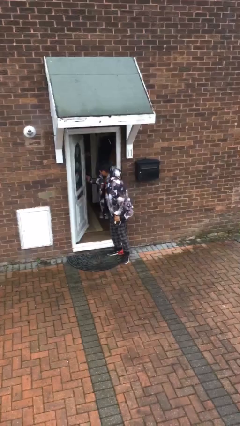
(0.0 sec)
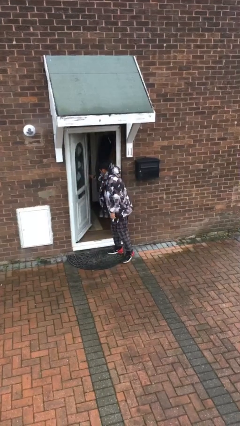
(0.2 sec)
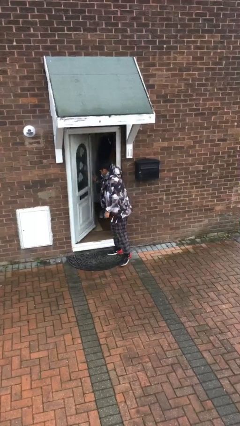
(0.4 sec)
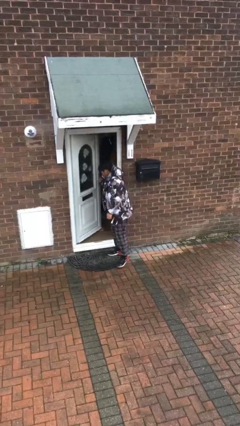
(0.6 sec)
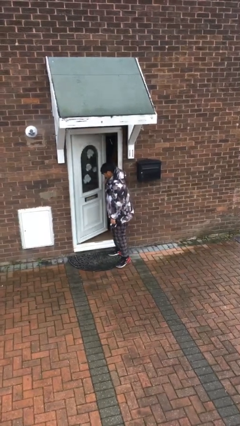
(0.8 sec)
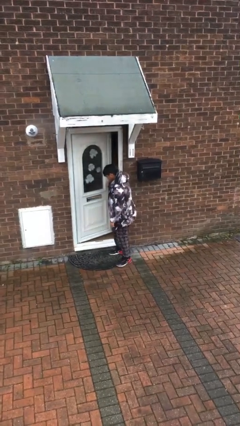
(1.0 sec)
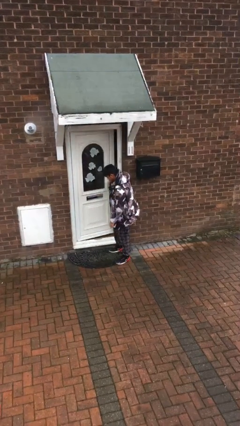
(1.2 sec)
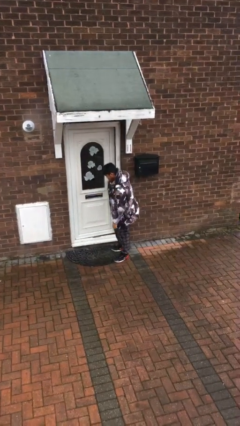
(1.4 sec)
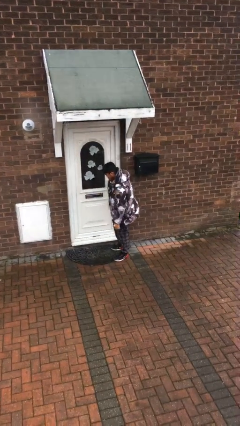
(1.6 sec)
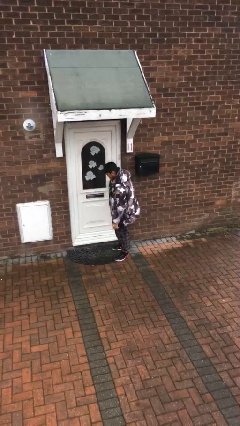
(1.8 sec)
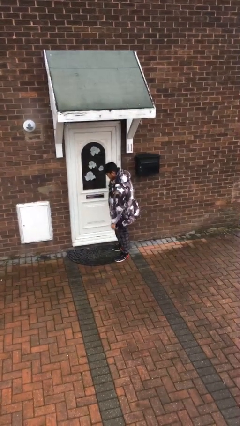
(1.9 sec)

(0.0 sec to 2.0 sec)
person closes facility door

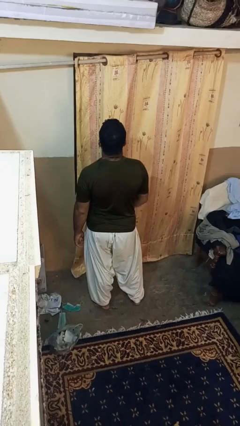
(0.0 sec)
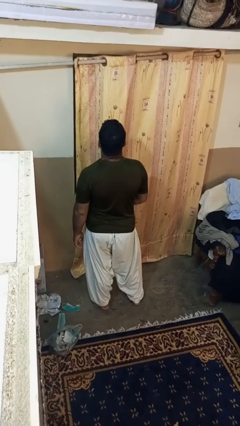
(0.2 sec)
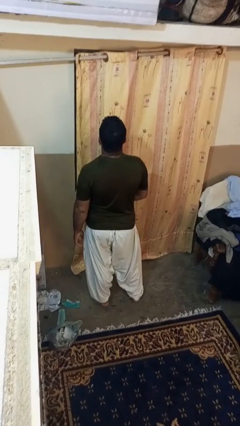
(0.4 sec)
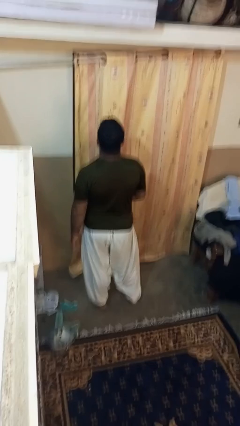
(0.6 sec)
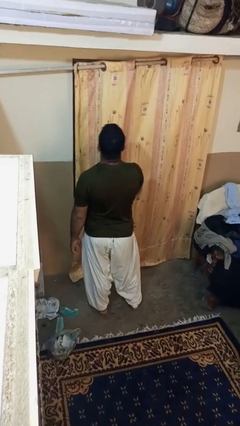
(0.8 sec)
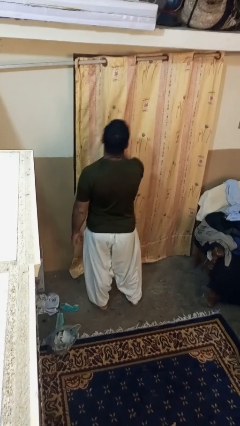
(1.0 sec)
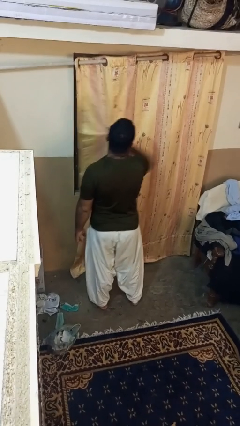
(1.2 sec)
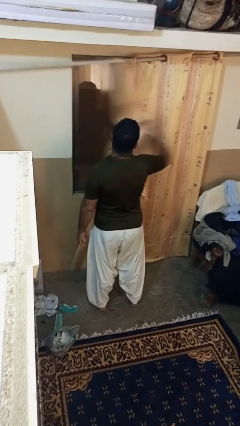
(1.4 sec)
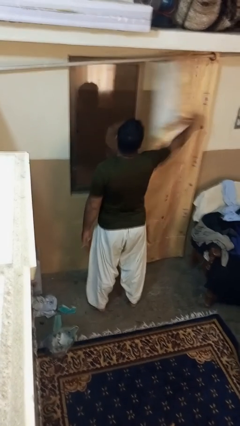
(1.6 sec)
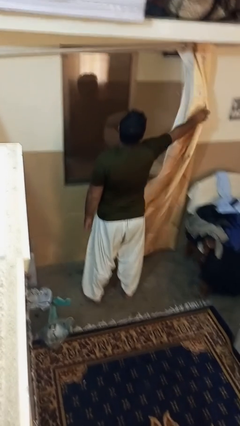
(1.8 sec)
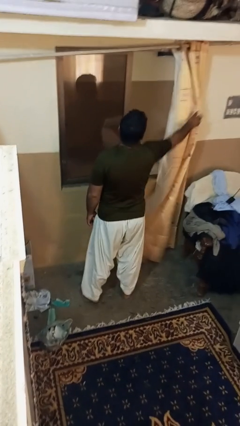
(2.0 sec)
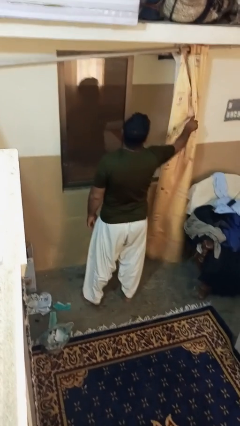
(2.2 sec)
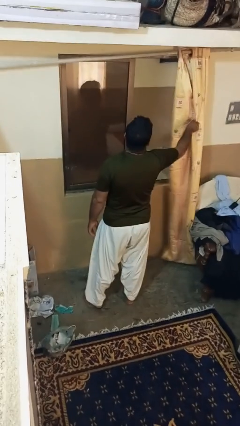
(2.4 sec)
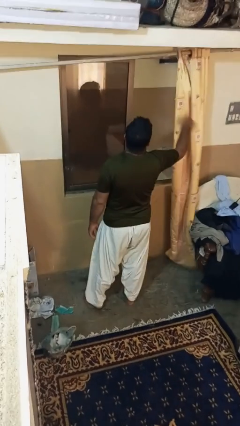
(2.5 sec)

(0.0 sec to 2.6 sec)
person opens curtains

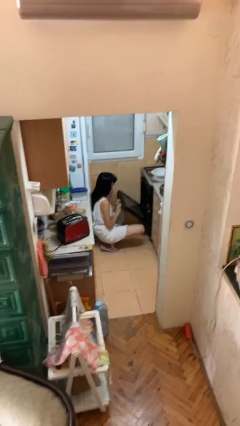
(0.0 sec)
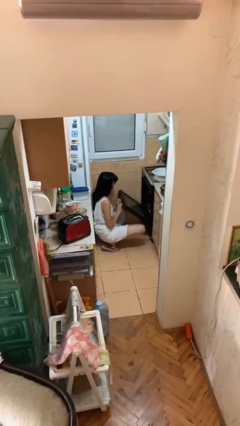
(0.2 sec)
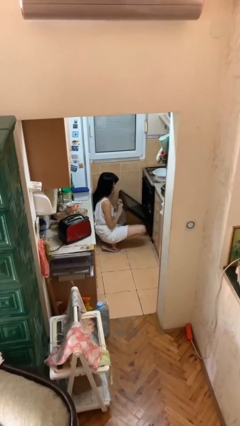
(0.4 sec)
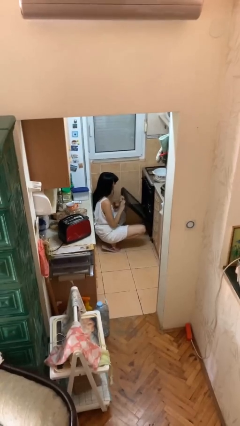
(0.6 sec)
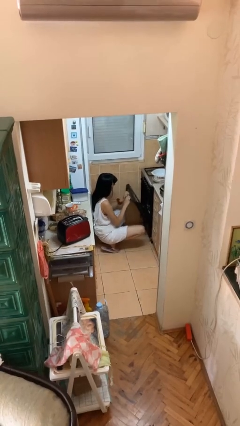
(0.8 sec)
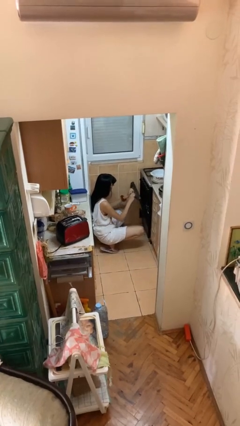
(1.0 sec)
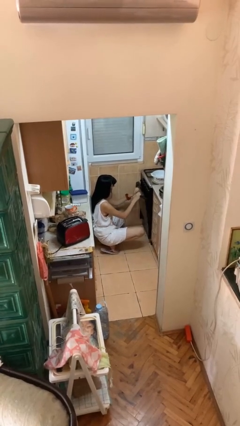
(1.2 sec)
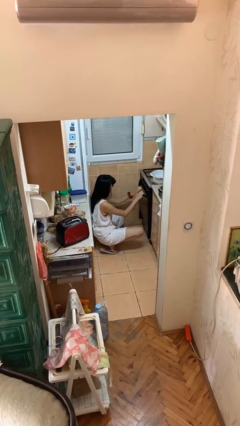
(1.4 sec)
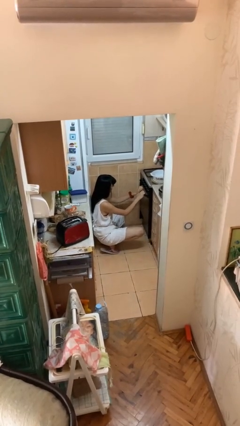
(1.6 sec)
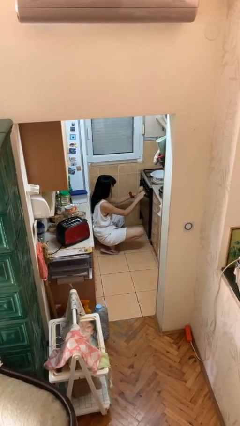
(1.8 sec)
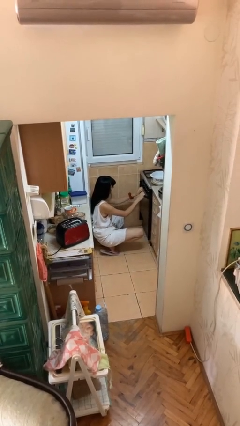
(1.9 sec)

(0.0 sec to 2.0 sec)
person closes oven door

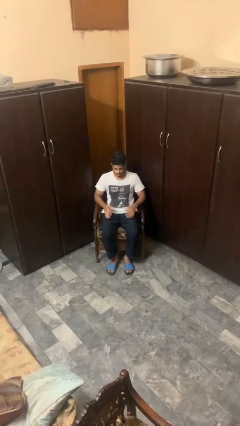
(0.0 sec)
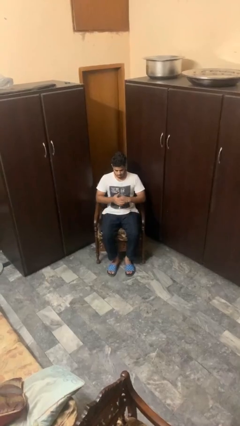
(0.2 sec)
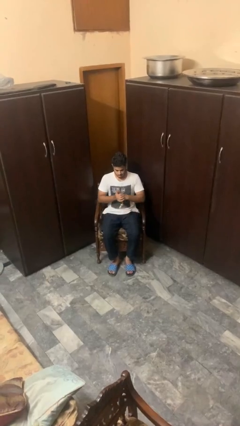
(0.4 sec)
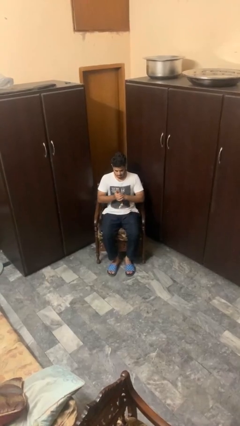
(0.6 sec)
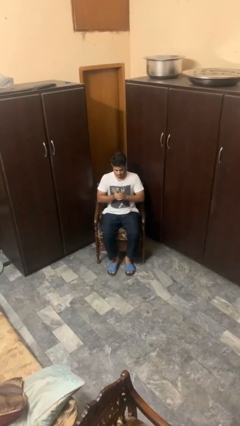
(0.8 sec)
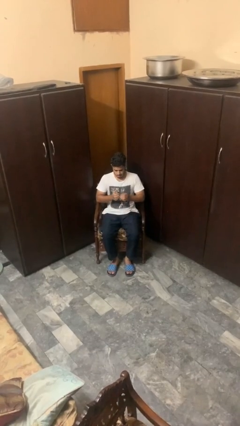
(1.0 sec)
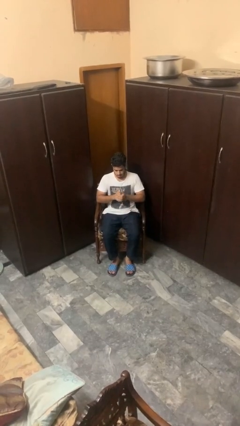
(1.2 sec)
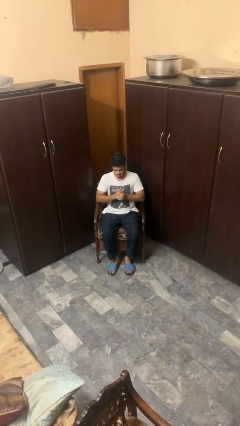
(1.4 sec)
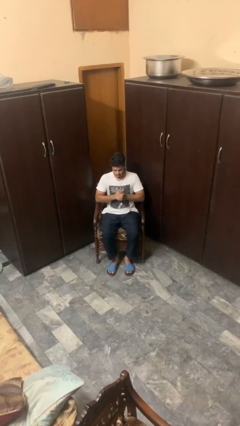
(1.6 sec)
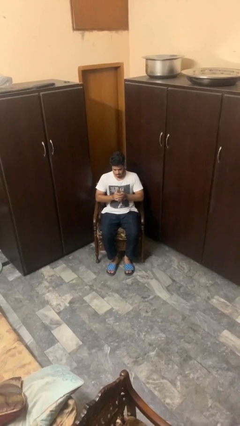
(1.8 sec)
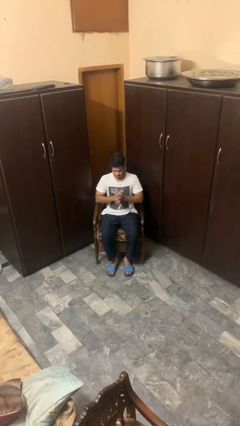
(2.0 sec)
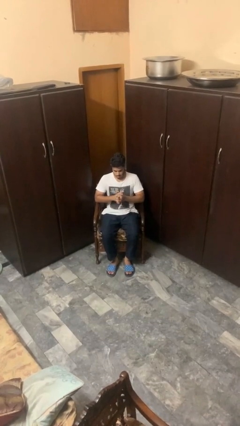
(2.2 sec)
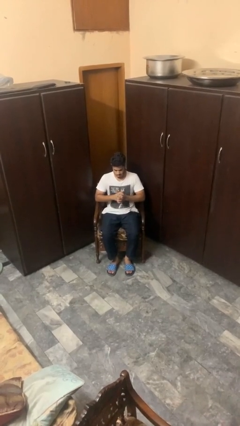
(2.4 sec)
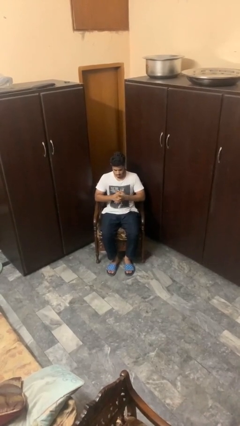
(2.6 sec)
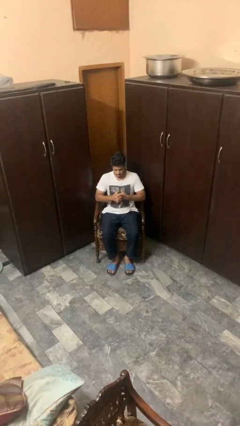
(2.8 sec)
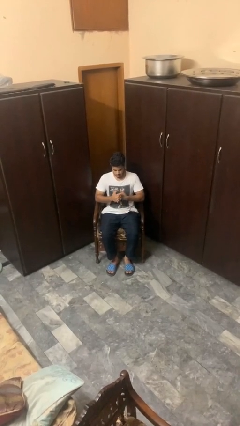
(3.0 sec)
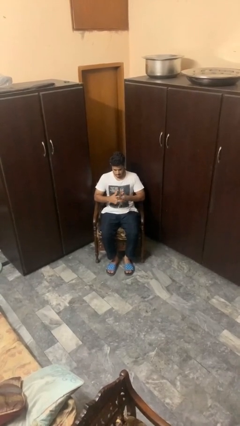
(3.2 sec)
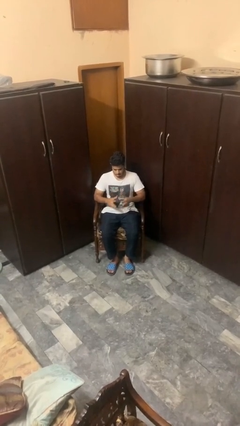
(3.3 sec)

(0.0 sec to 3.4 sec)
person cracks knuckles

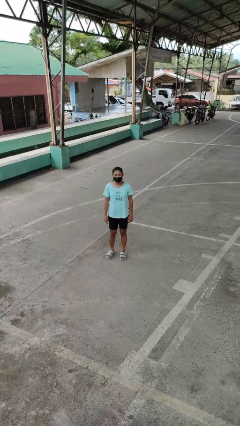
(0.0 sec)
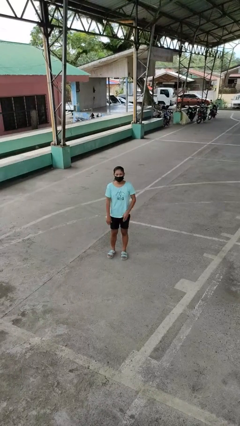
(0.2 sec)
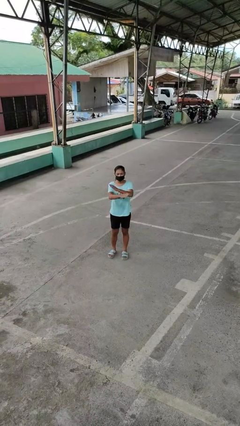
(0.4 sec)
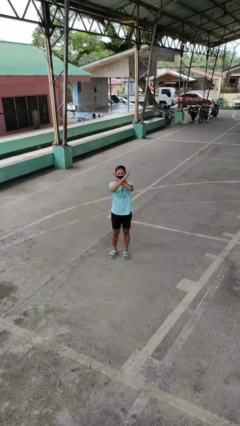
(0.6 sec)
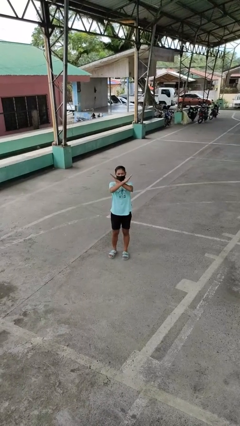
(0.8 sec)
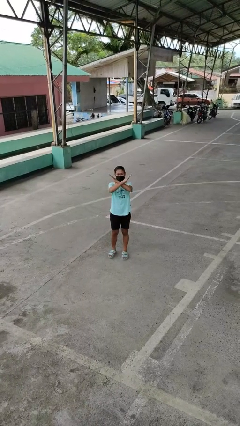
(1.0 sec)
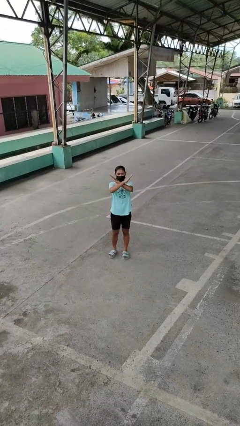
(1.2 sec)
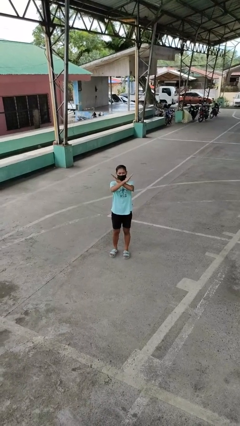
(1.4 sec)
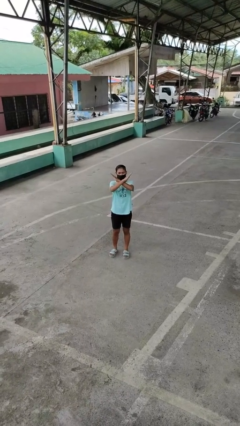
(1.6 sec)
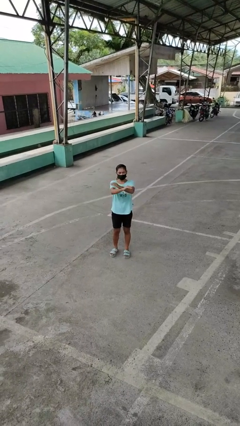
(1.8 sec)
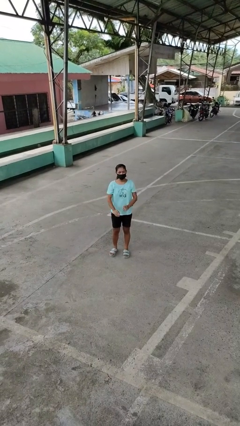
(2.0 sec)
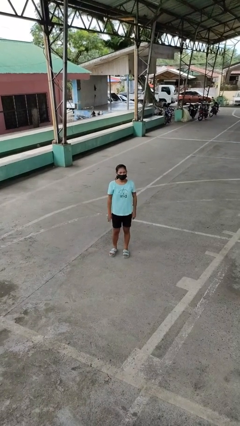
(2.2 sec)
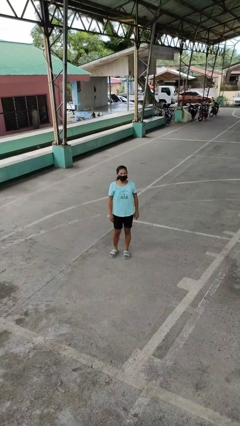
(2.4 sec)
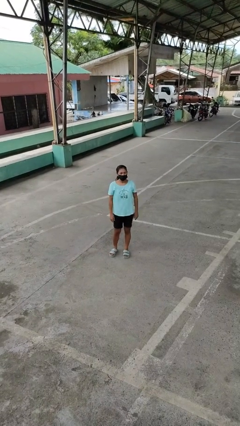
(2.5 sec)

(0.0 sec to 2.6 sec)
person gestures arms x

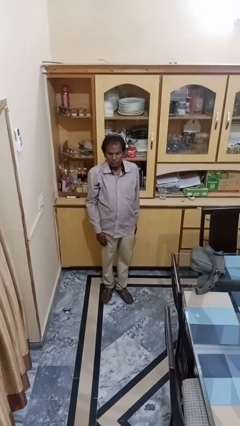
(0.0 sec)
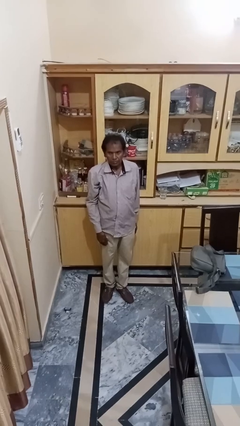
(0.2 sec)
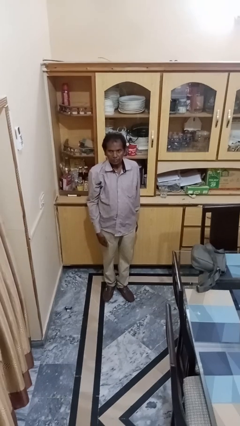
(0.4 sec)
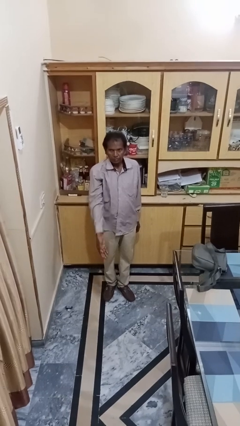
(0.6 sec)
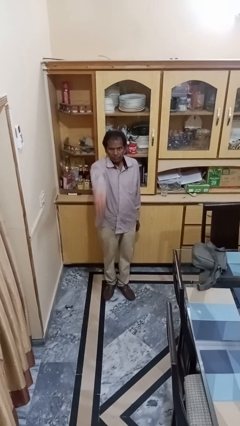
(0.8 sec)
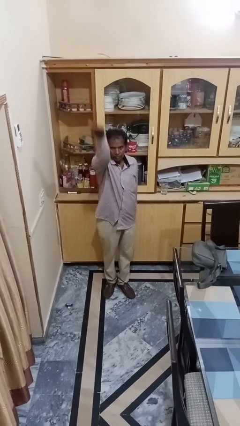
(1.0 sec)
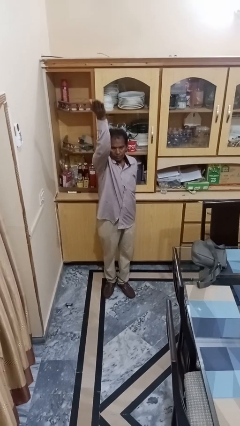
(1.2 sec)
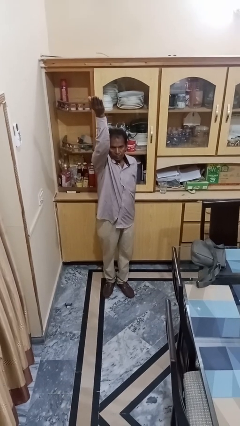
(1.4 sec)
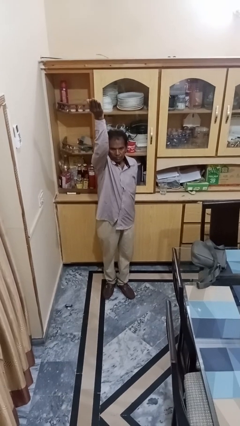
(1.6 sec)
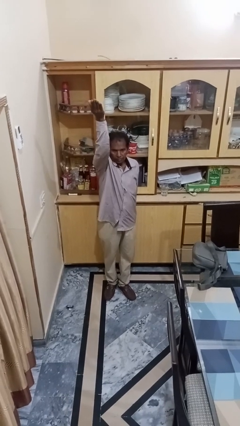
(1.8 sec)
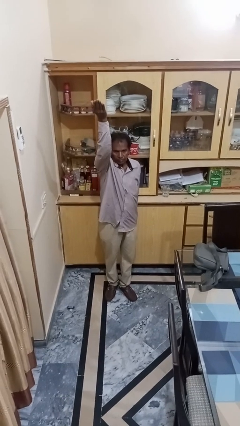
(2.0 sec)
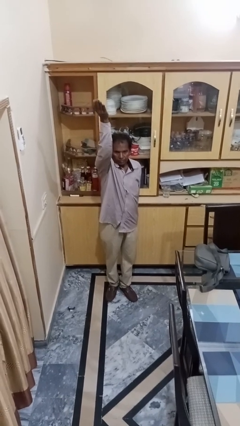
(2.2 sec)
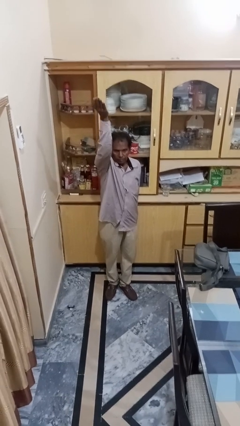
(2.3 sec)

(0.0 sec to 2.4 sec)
person gestures swipe up

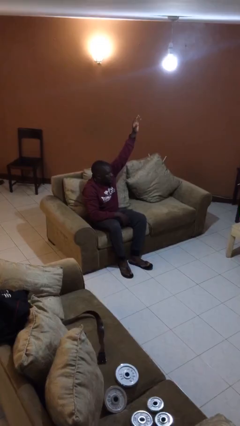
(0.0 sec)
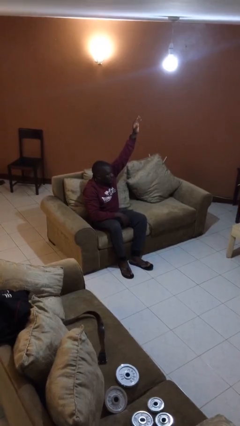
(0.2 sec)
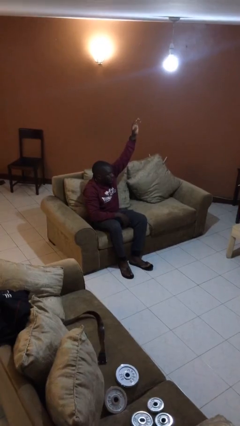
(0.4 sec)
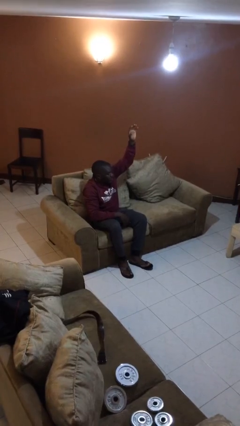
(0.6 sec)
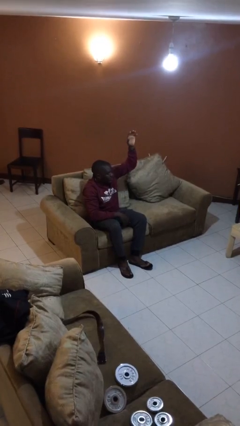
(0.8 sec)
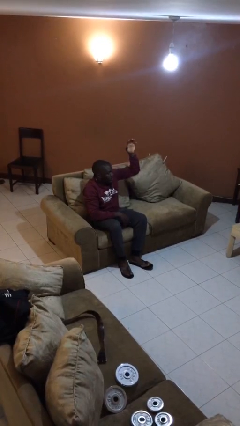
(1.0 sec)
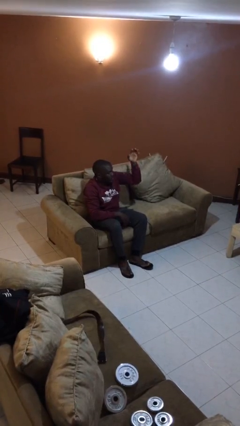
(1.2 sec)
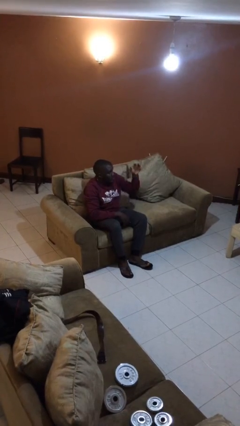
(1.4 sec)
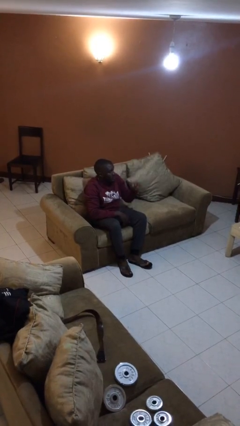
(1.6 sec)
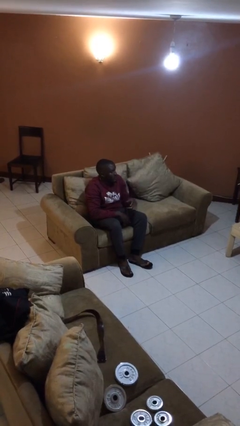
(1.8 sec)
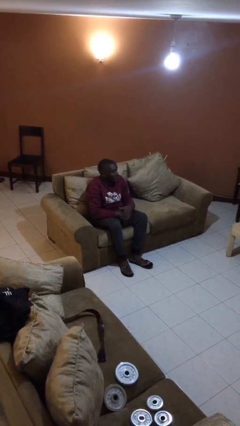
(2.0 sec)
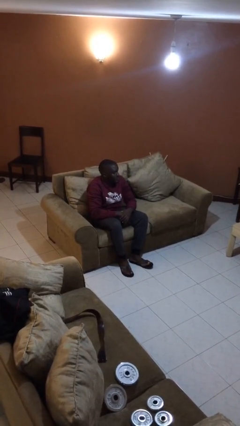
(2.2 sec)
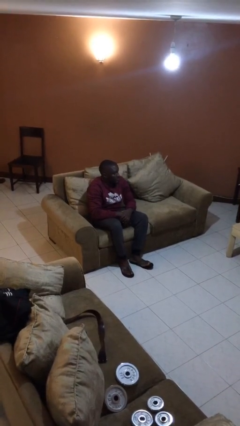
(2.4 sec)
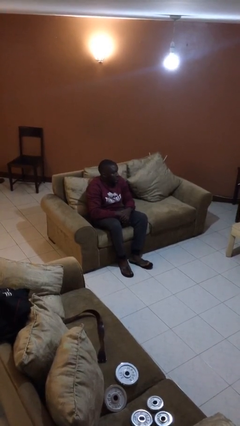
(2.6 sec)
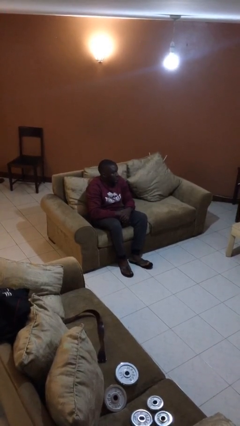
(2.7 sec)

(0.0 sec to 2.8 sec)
person gestures lower hand
